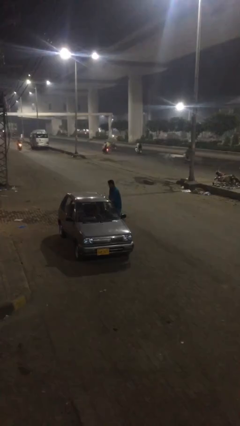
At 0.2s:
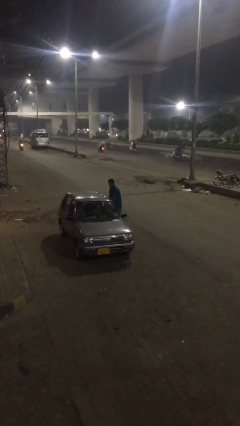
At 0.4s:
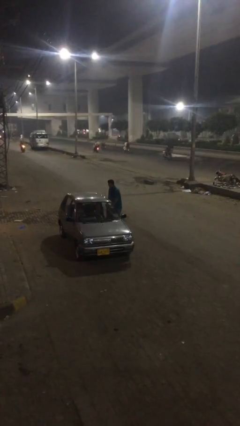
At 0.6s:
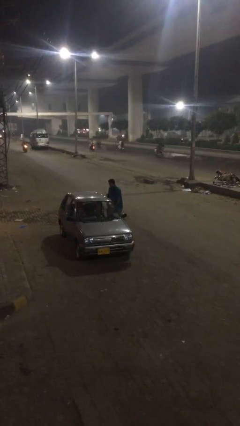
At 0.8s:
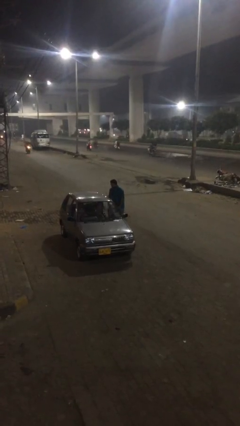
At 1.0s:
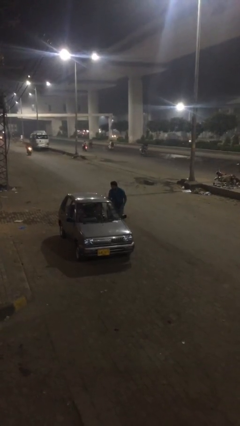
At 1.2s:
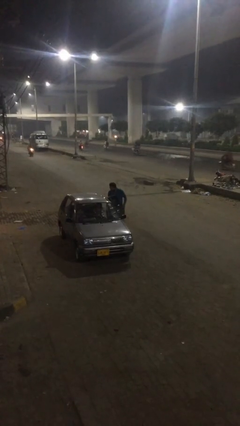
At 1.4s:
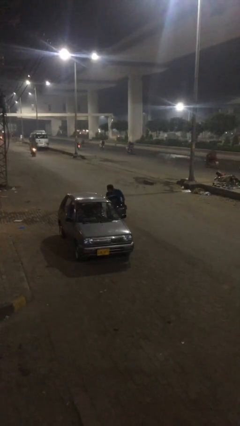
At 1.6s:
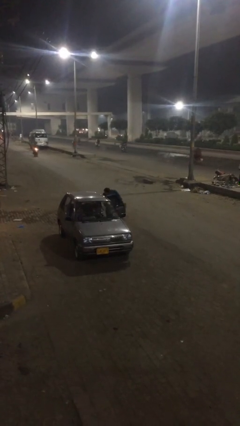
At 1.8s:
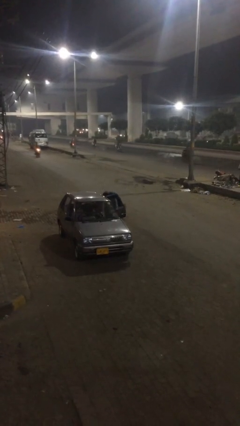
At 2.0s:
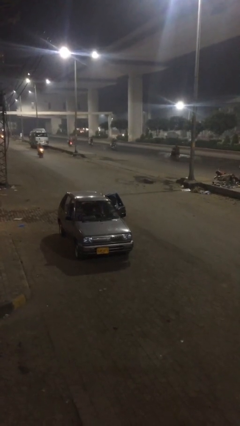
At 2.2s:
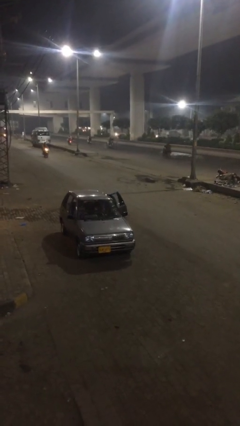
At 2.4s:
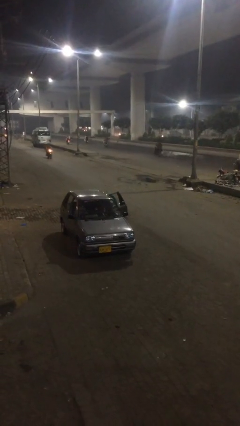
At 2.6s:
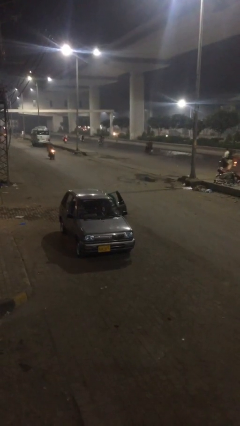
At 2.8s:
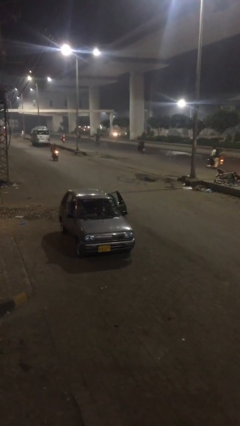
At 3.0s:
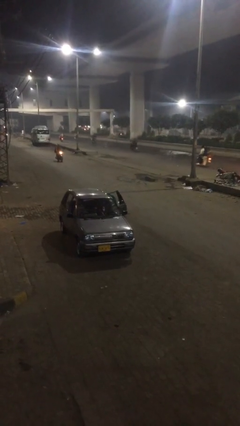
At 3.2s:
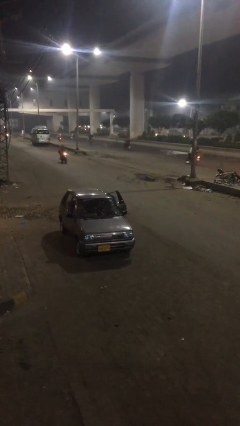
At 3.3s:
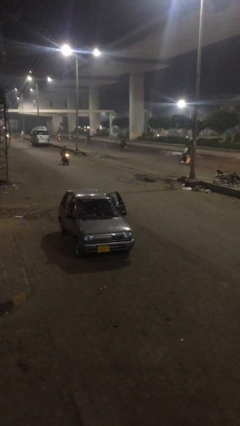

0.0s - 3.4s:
person opens car door

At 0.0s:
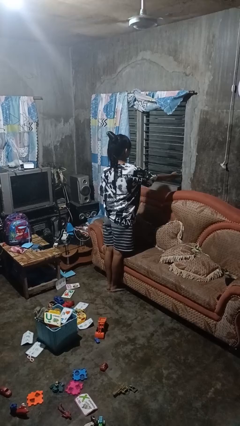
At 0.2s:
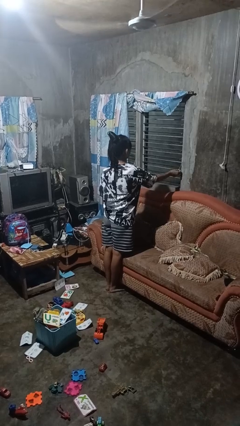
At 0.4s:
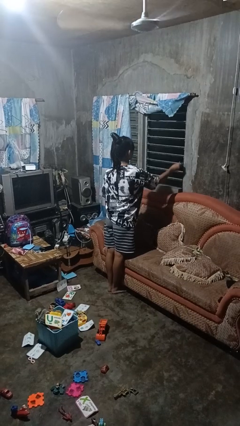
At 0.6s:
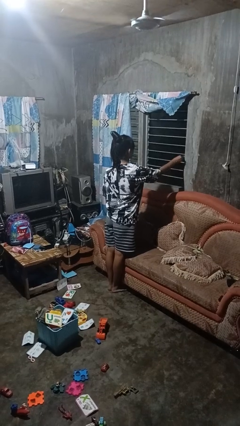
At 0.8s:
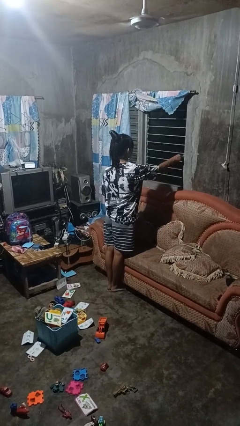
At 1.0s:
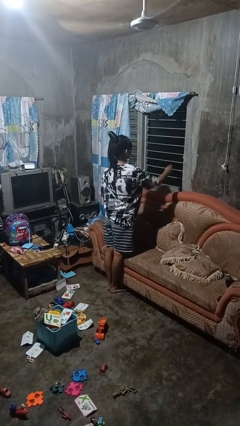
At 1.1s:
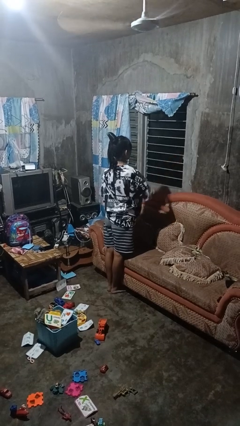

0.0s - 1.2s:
person closes home window

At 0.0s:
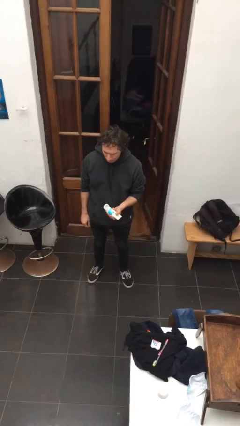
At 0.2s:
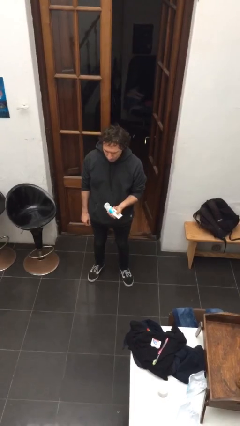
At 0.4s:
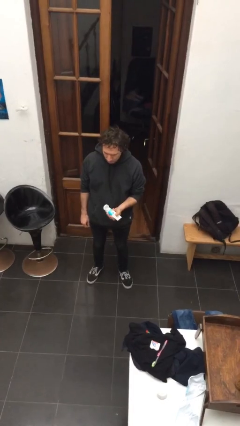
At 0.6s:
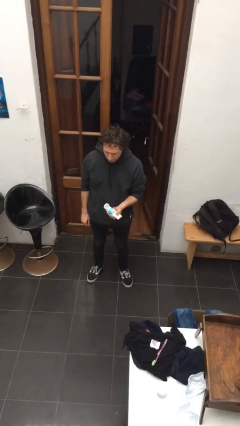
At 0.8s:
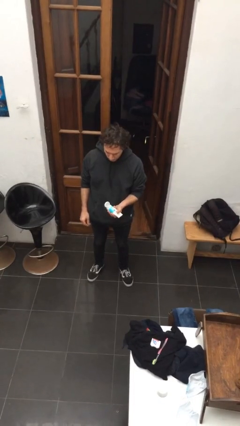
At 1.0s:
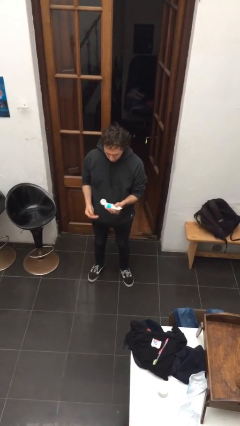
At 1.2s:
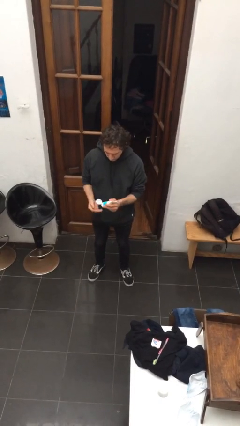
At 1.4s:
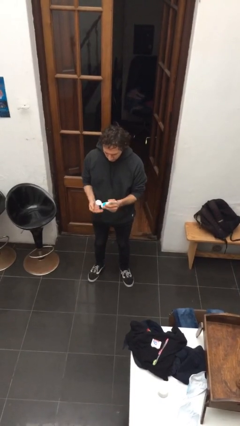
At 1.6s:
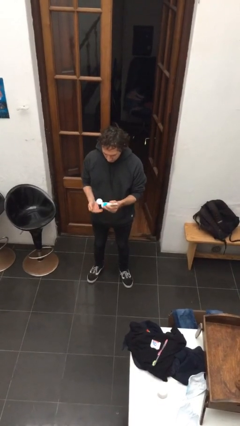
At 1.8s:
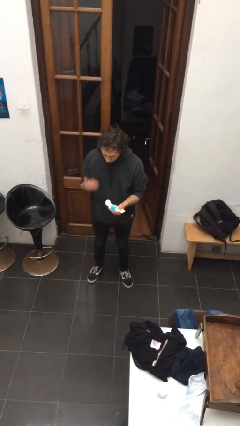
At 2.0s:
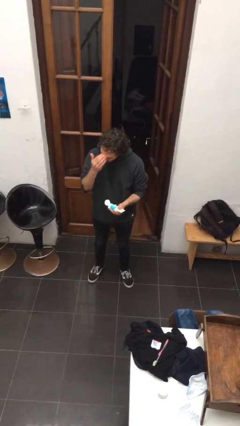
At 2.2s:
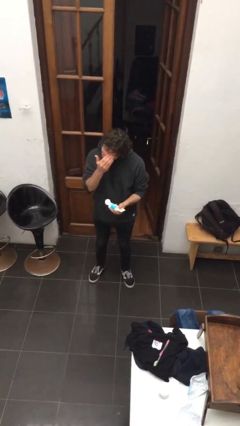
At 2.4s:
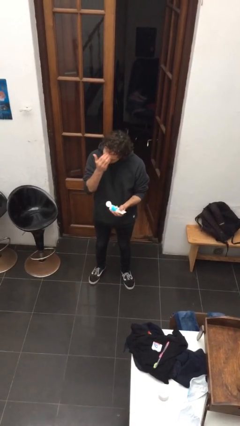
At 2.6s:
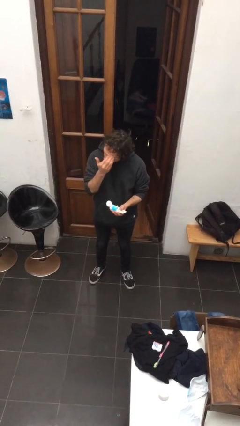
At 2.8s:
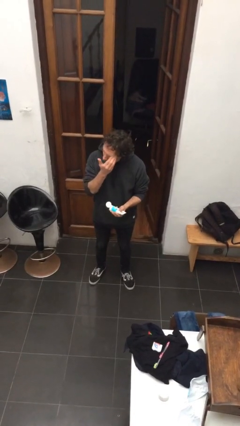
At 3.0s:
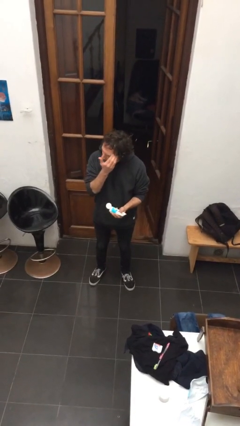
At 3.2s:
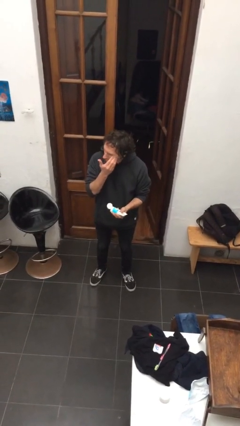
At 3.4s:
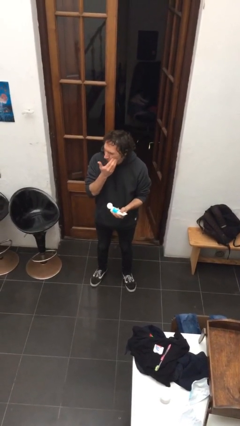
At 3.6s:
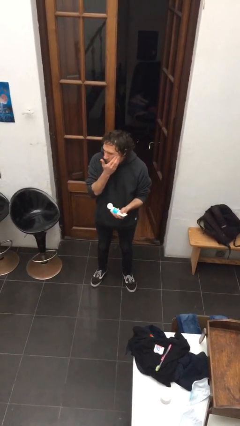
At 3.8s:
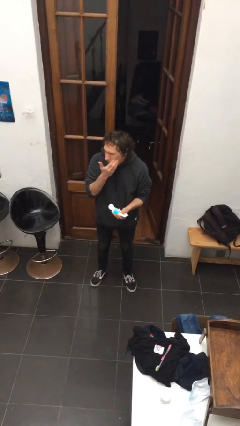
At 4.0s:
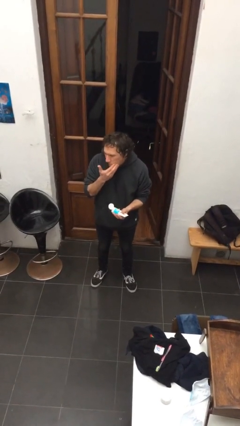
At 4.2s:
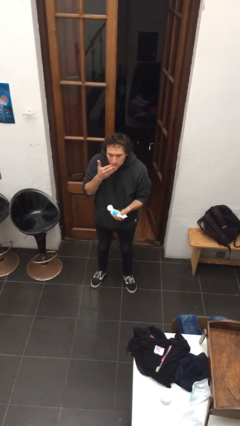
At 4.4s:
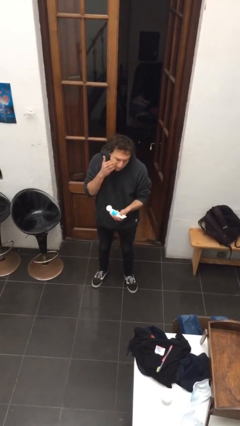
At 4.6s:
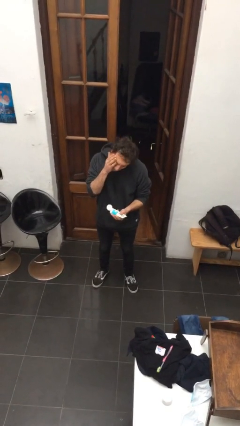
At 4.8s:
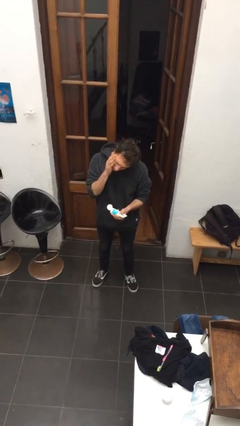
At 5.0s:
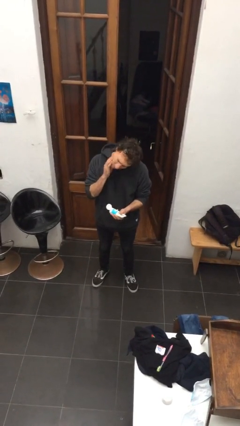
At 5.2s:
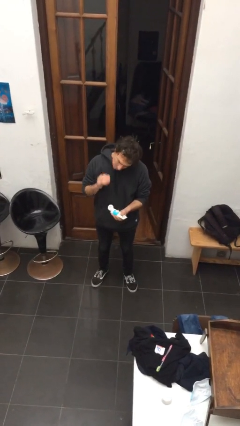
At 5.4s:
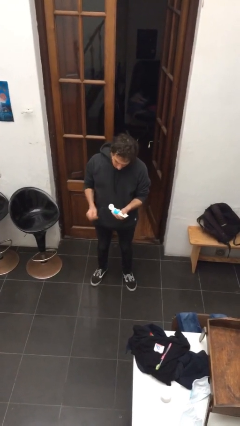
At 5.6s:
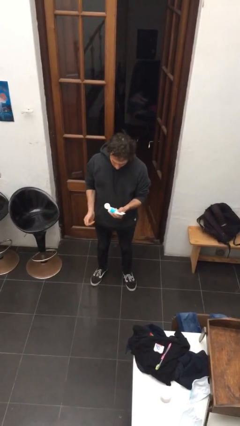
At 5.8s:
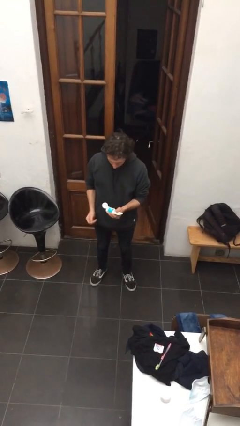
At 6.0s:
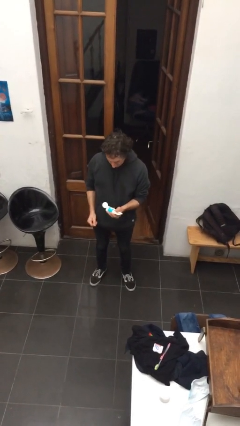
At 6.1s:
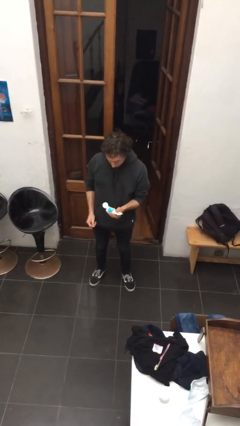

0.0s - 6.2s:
person applies facial moisturizer

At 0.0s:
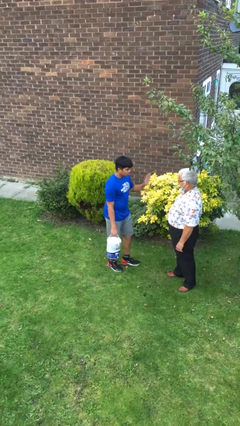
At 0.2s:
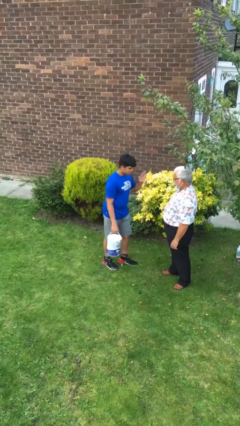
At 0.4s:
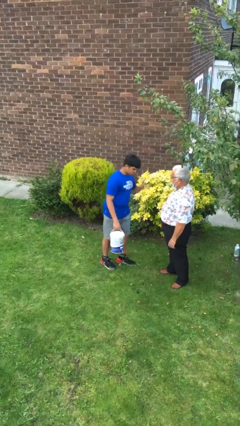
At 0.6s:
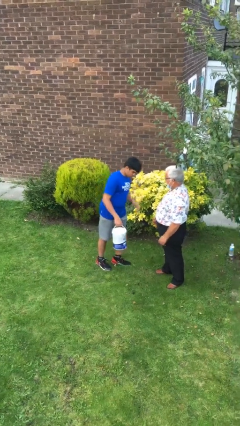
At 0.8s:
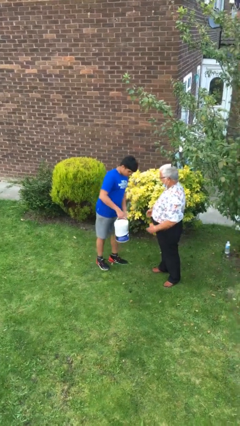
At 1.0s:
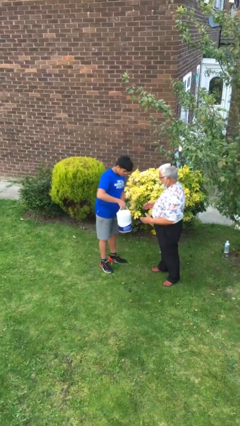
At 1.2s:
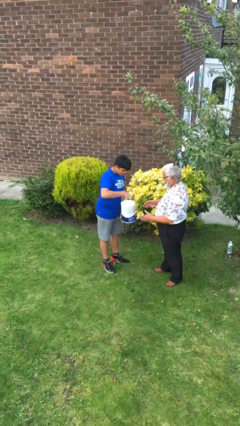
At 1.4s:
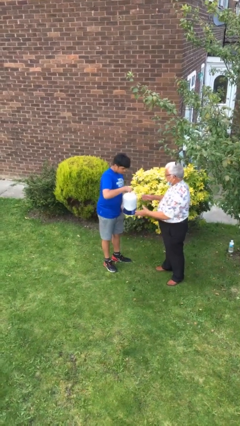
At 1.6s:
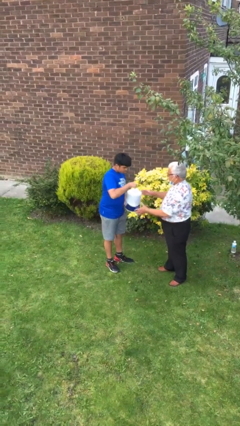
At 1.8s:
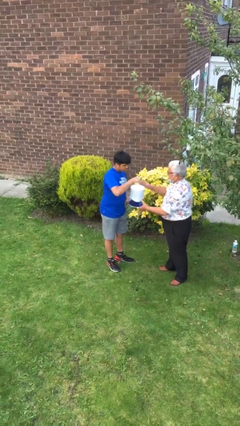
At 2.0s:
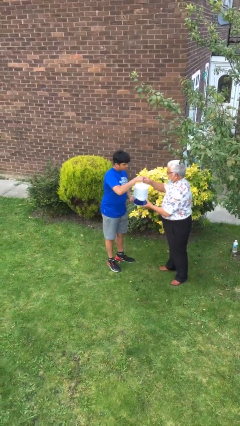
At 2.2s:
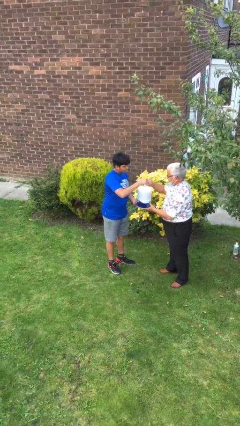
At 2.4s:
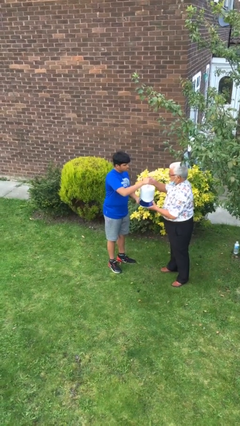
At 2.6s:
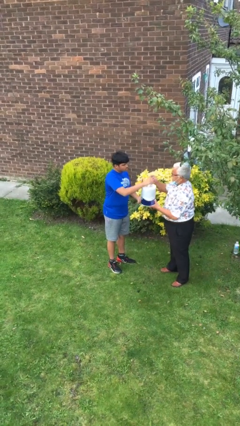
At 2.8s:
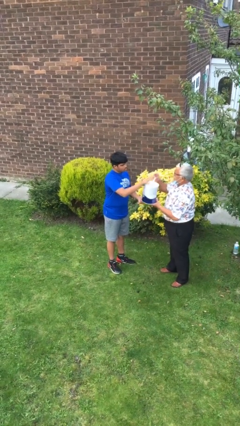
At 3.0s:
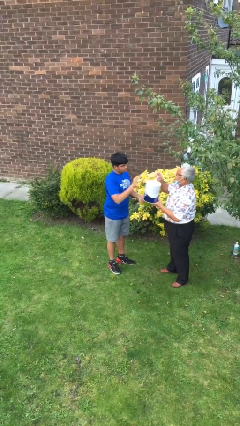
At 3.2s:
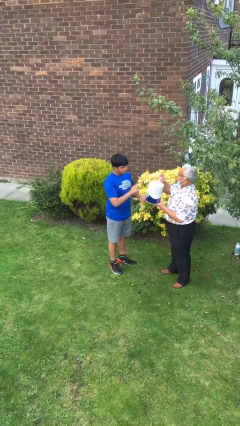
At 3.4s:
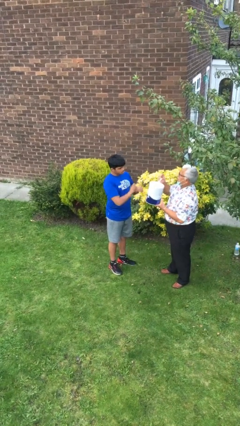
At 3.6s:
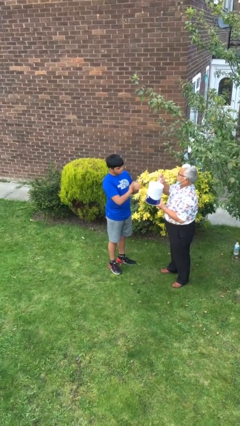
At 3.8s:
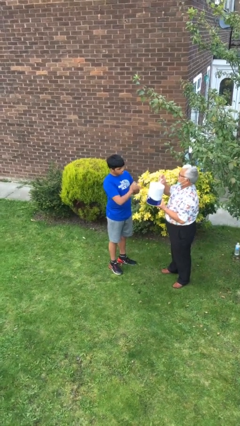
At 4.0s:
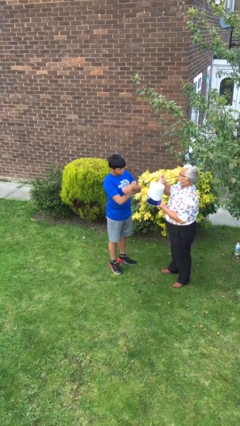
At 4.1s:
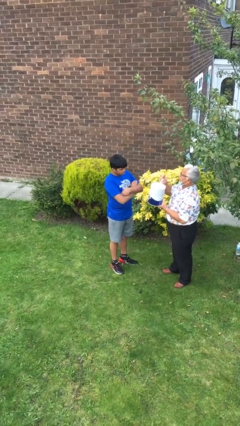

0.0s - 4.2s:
person transfers object to person

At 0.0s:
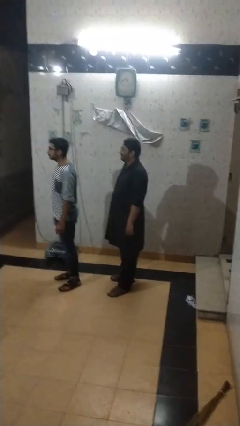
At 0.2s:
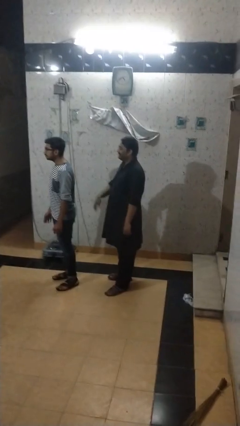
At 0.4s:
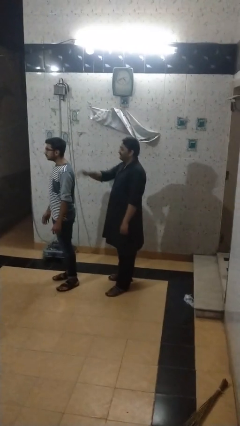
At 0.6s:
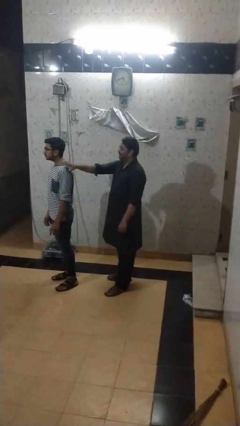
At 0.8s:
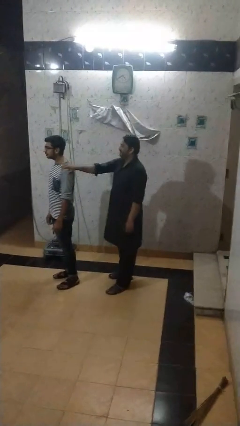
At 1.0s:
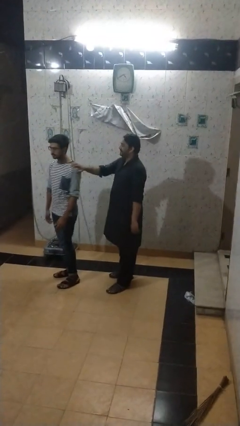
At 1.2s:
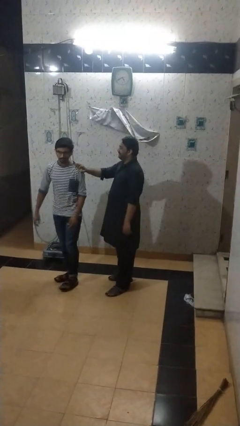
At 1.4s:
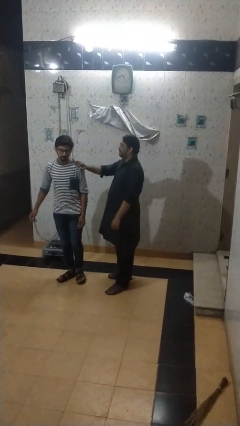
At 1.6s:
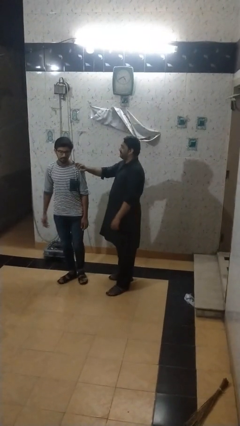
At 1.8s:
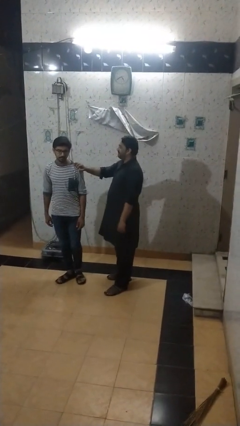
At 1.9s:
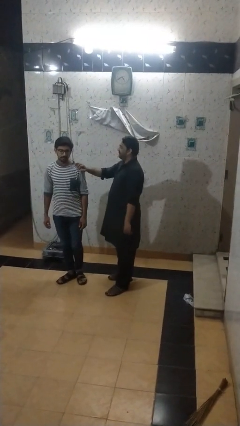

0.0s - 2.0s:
person grabs person by shoulder

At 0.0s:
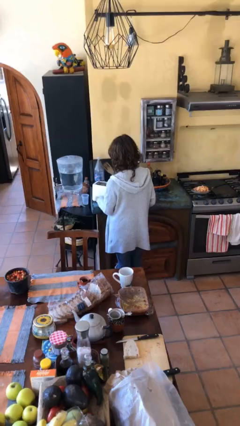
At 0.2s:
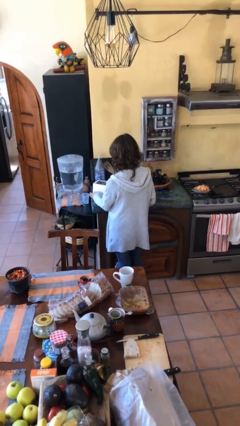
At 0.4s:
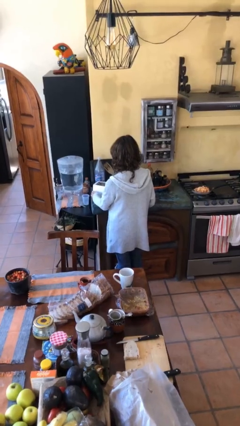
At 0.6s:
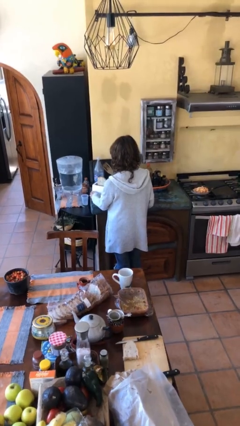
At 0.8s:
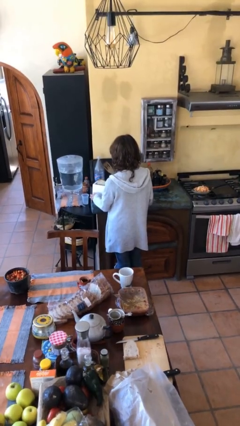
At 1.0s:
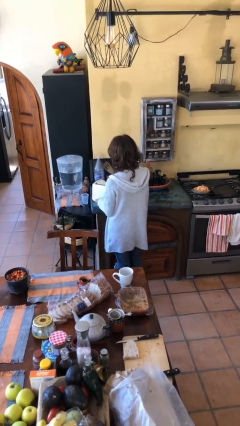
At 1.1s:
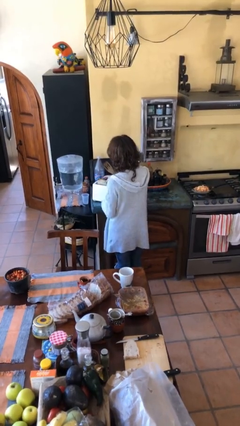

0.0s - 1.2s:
person takes object from toaster
